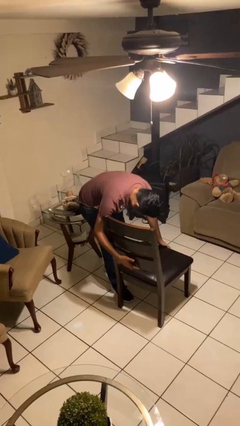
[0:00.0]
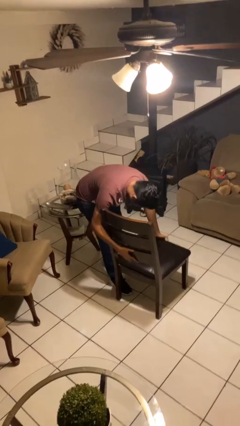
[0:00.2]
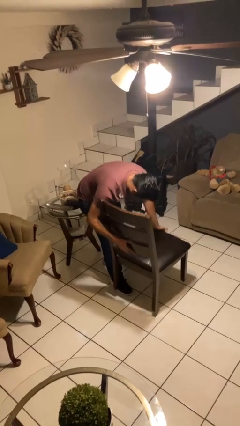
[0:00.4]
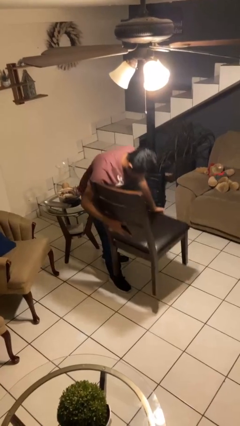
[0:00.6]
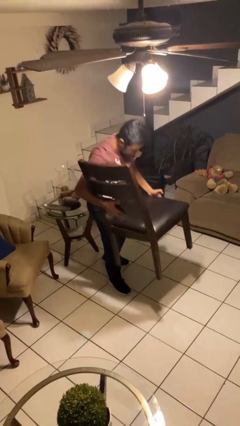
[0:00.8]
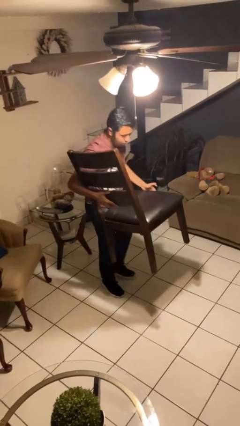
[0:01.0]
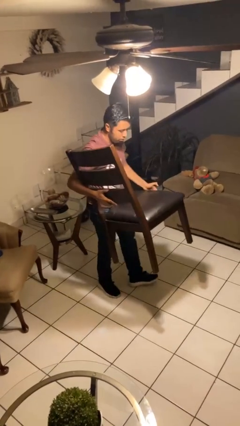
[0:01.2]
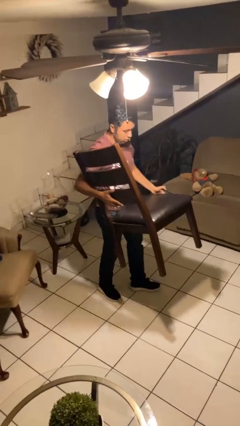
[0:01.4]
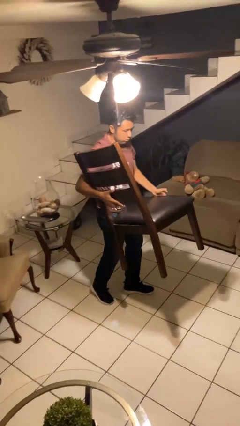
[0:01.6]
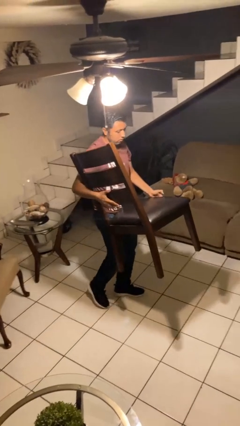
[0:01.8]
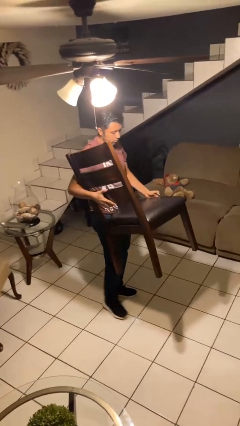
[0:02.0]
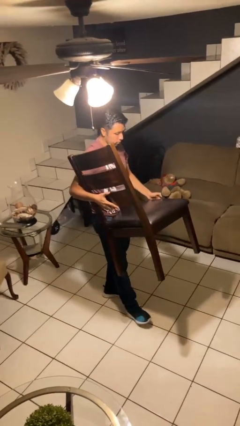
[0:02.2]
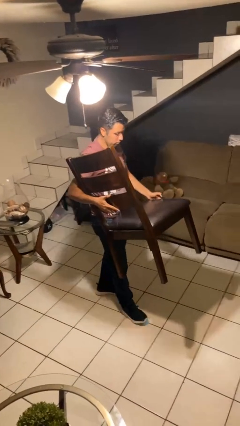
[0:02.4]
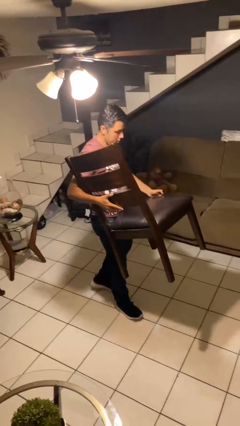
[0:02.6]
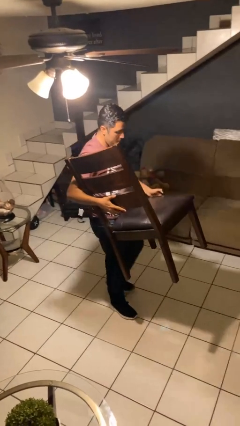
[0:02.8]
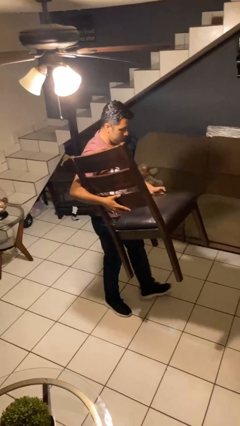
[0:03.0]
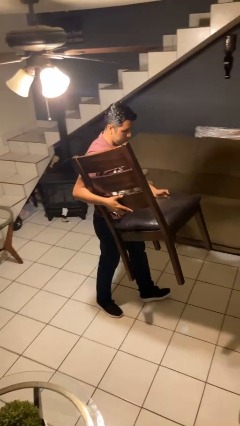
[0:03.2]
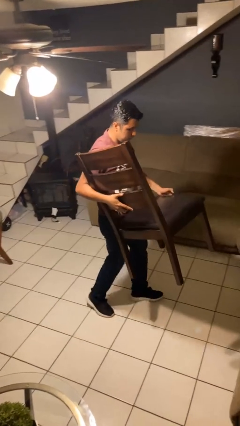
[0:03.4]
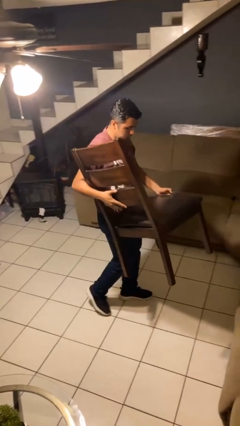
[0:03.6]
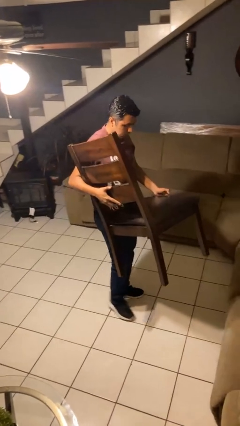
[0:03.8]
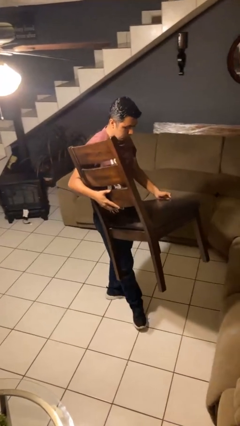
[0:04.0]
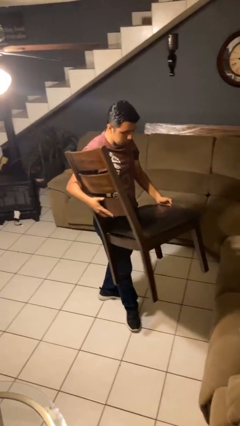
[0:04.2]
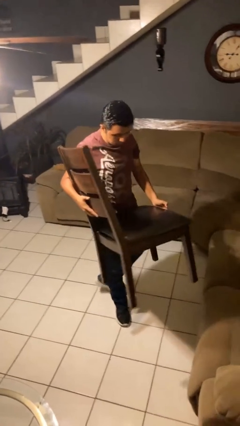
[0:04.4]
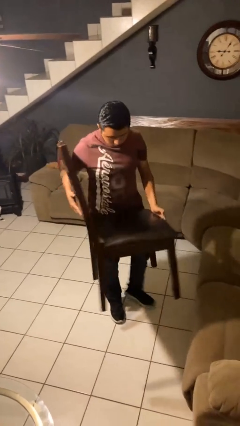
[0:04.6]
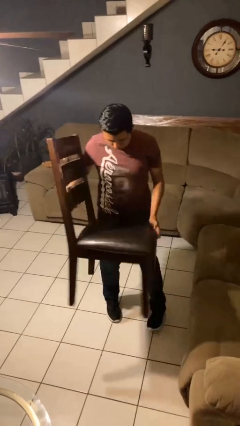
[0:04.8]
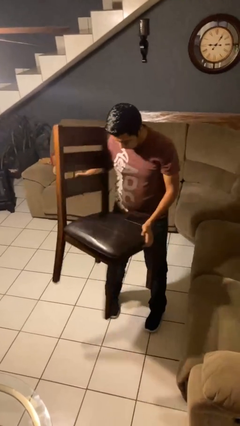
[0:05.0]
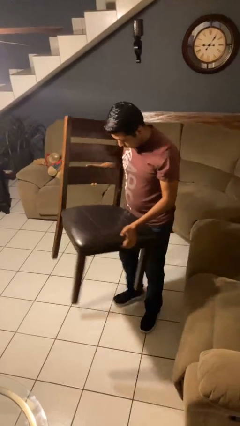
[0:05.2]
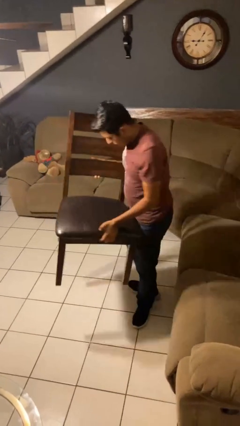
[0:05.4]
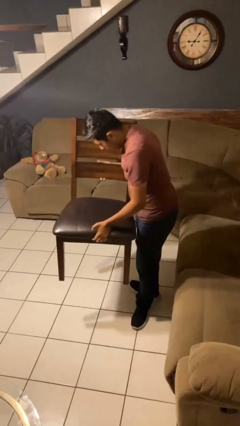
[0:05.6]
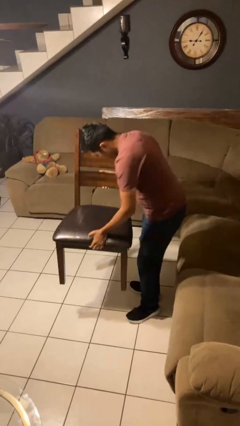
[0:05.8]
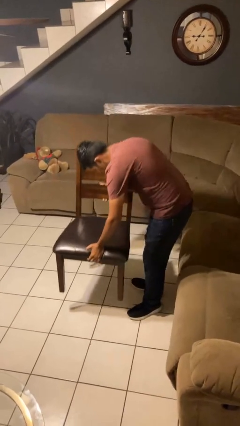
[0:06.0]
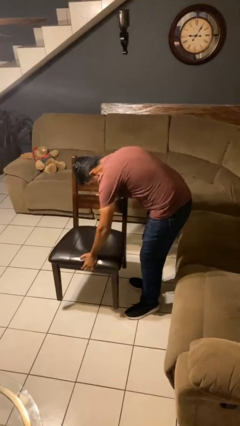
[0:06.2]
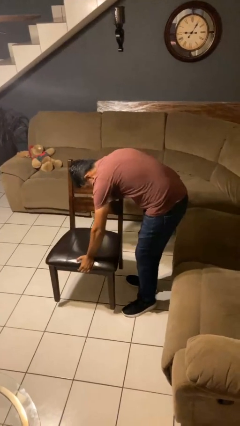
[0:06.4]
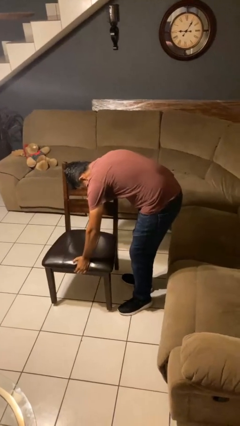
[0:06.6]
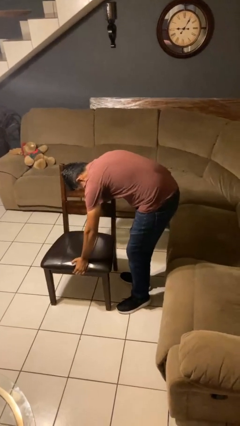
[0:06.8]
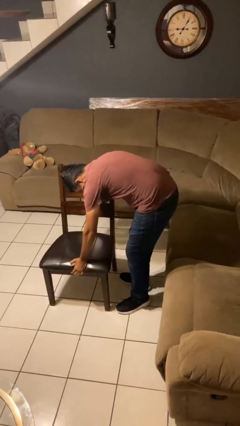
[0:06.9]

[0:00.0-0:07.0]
person carries furniture

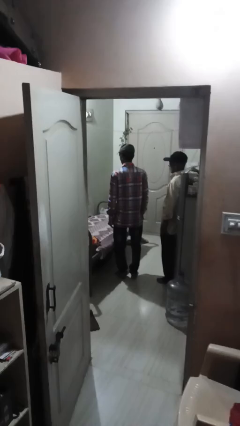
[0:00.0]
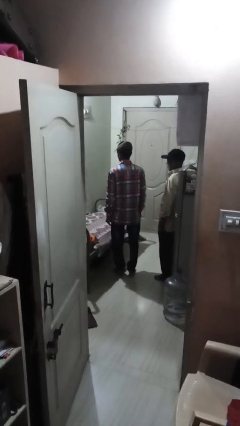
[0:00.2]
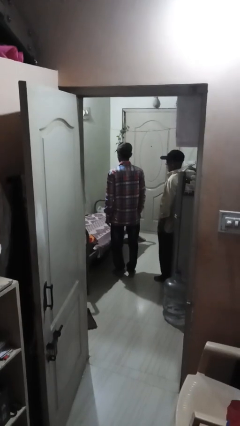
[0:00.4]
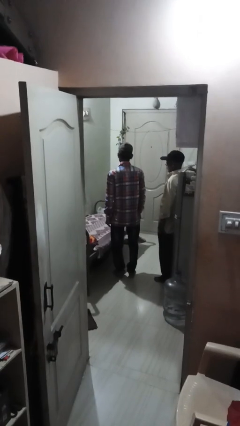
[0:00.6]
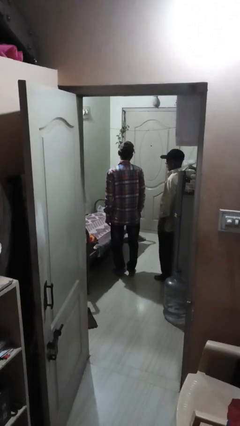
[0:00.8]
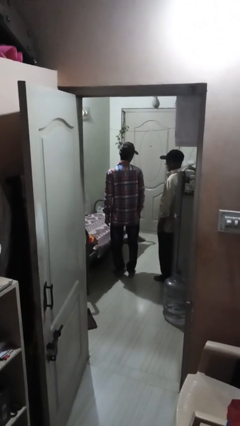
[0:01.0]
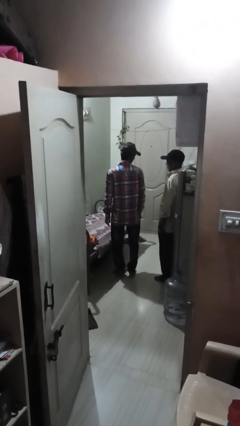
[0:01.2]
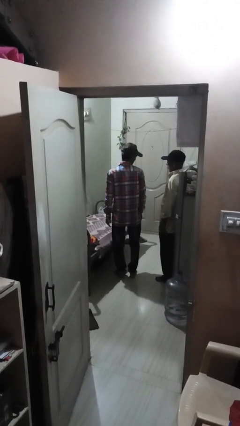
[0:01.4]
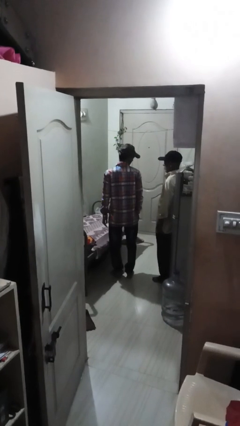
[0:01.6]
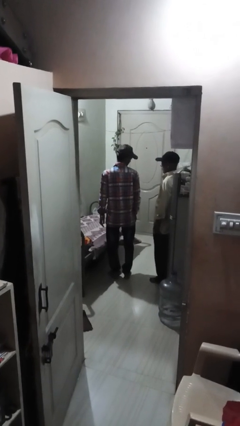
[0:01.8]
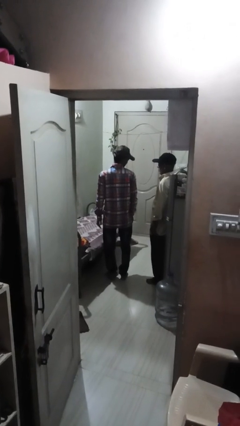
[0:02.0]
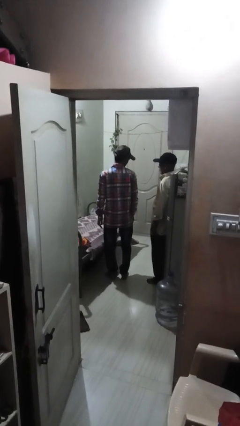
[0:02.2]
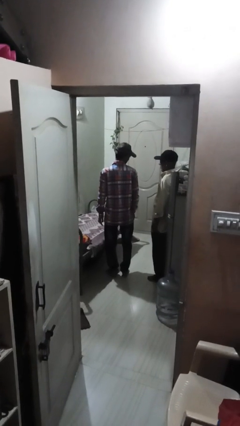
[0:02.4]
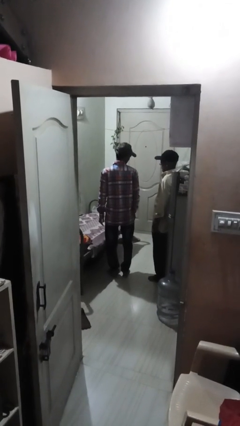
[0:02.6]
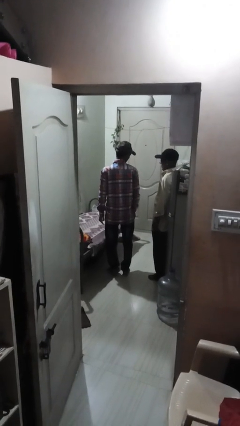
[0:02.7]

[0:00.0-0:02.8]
person looks over shoulder

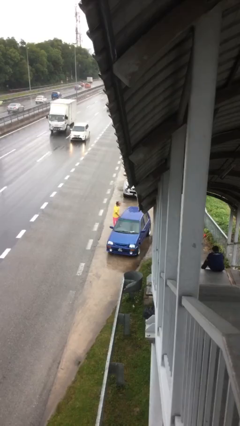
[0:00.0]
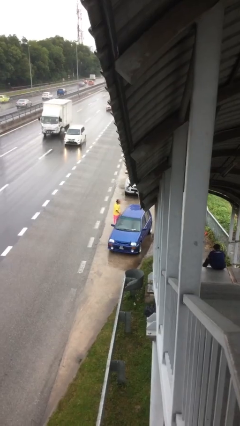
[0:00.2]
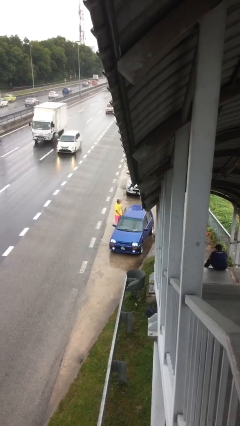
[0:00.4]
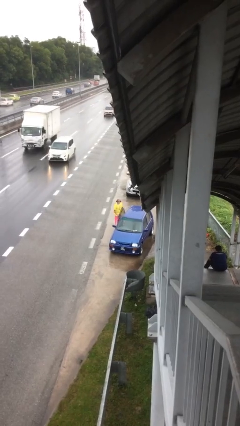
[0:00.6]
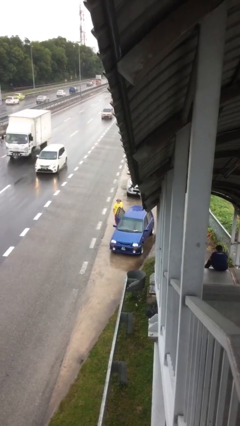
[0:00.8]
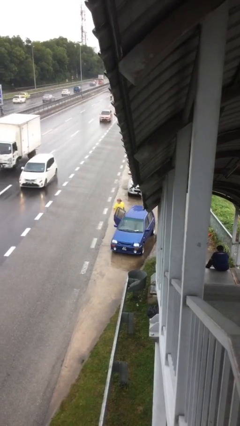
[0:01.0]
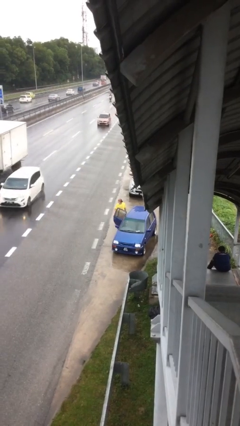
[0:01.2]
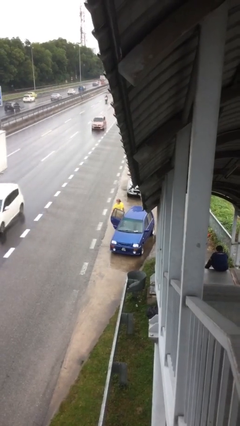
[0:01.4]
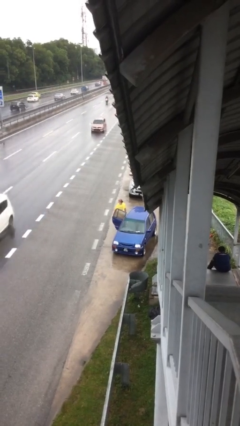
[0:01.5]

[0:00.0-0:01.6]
person opens car door

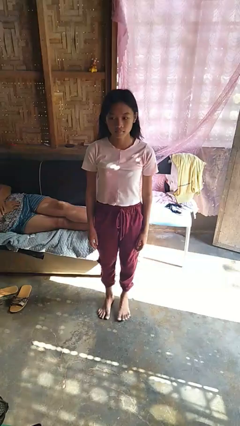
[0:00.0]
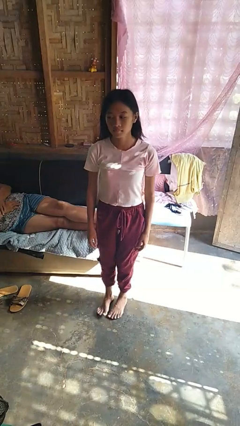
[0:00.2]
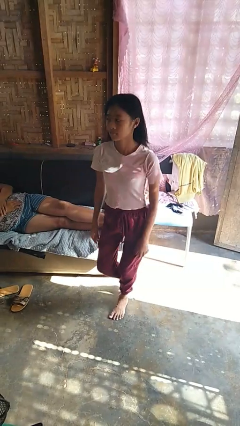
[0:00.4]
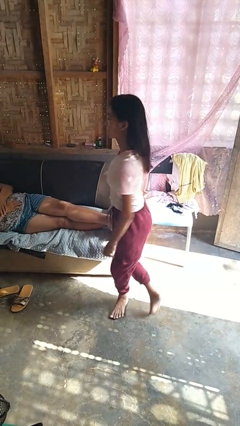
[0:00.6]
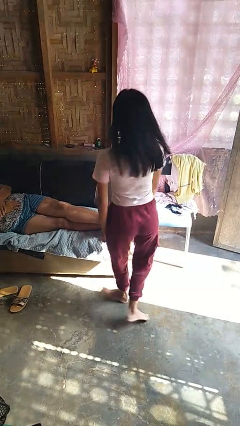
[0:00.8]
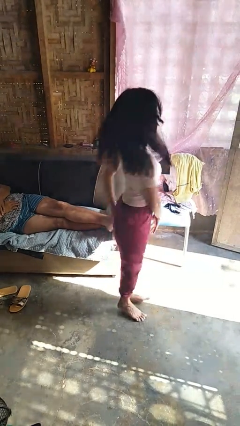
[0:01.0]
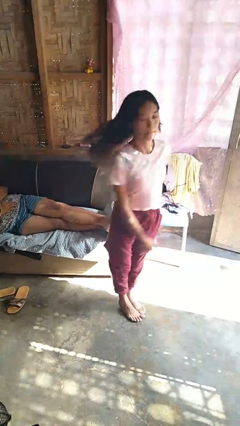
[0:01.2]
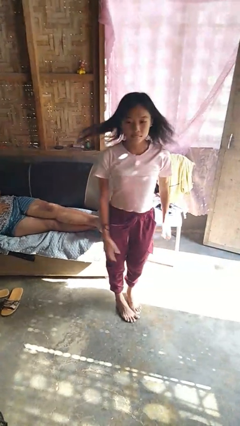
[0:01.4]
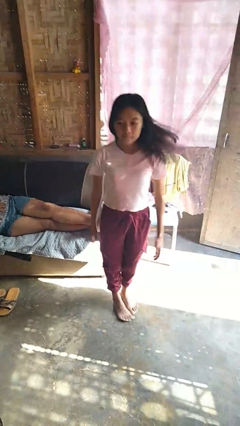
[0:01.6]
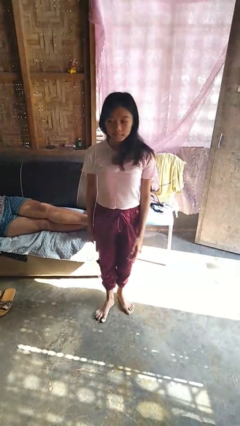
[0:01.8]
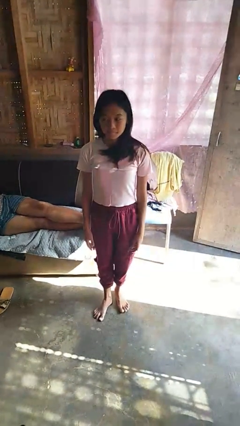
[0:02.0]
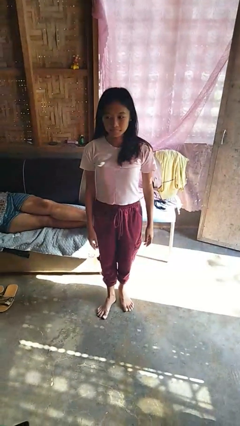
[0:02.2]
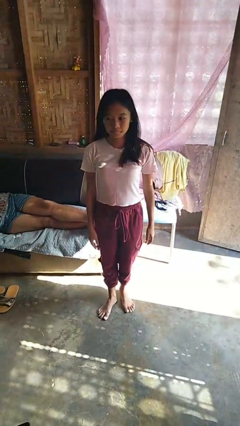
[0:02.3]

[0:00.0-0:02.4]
person twirls

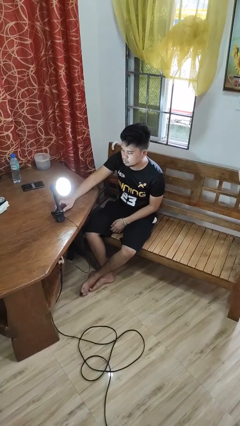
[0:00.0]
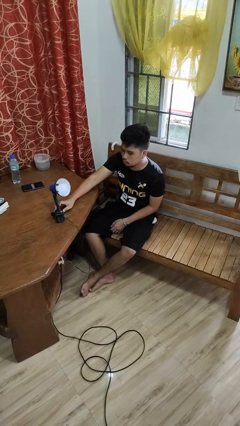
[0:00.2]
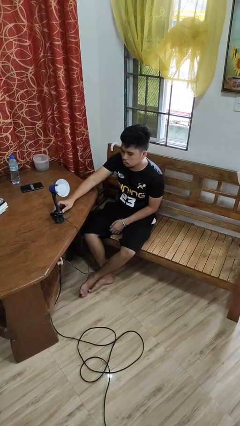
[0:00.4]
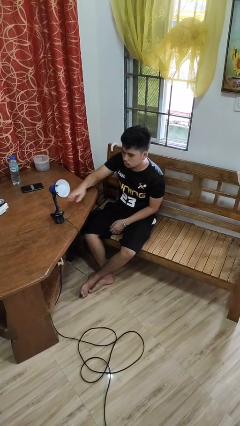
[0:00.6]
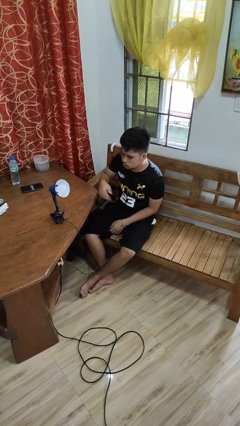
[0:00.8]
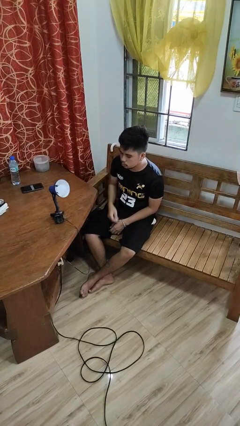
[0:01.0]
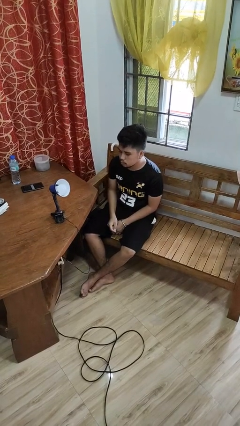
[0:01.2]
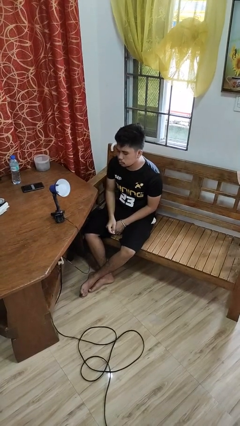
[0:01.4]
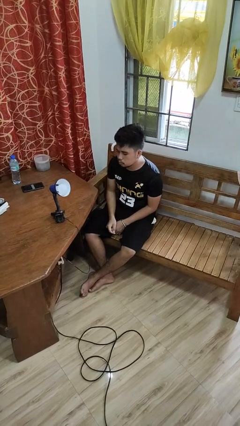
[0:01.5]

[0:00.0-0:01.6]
person turns off lamp

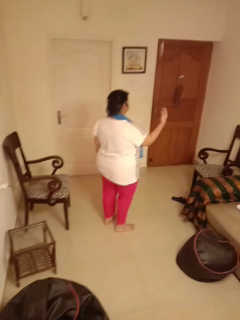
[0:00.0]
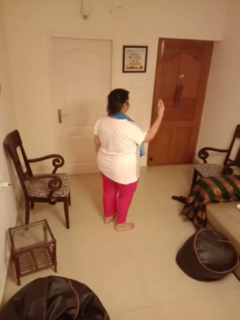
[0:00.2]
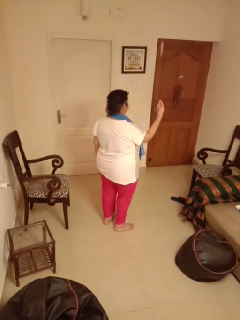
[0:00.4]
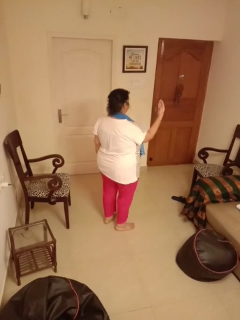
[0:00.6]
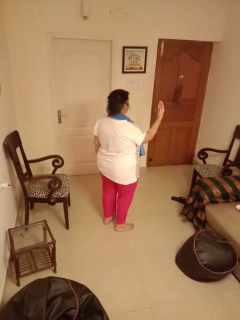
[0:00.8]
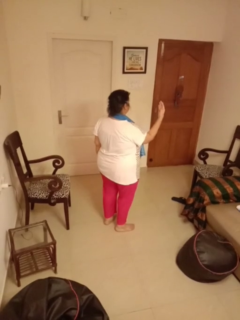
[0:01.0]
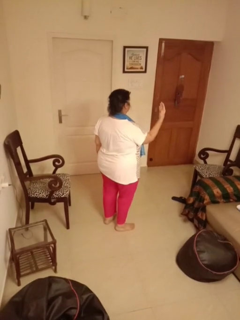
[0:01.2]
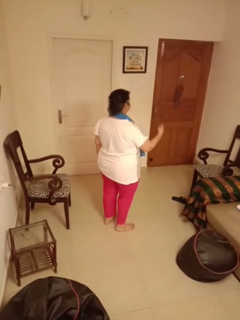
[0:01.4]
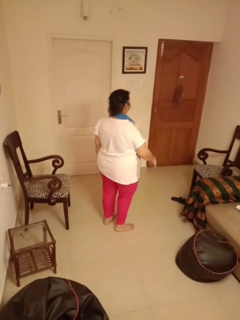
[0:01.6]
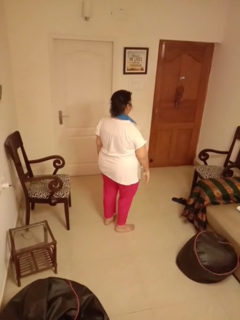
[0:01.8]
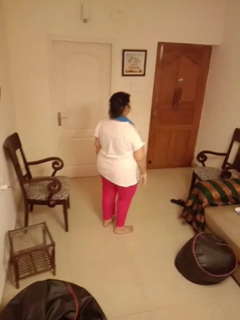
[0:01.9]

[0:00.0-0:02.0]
person gestures number four

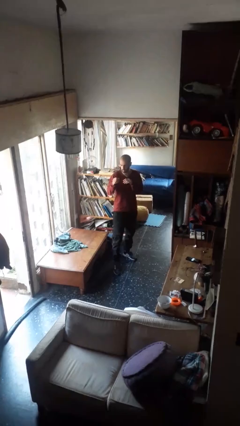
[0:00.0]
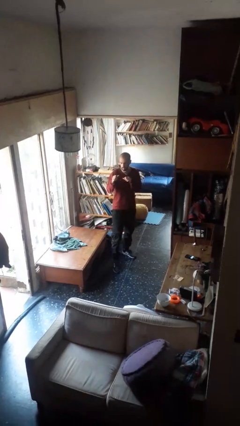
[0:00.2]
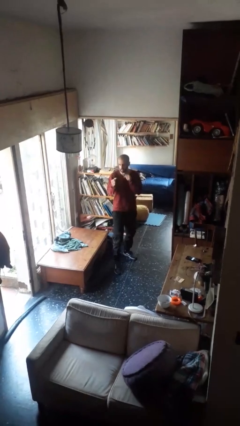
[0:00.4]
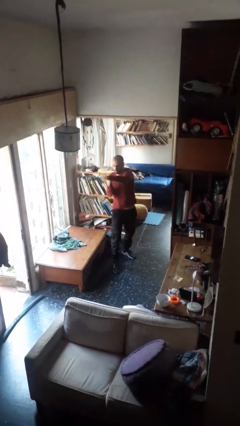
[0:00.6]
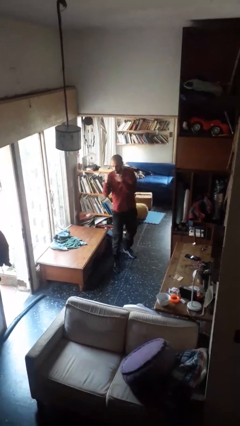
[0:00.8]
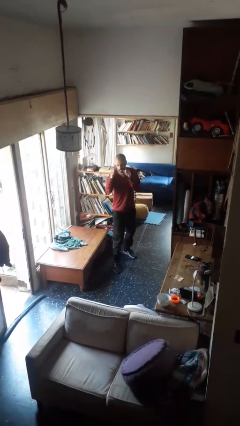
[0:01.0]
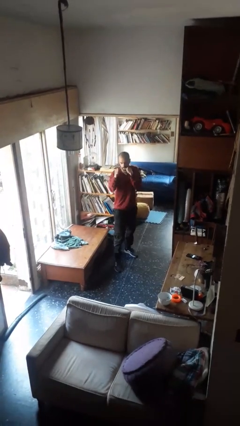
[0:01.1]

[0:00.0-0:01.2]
person punches
